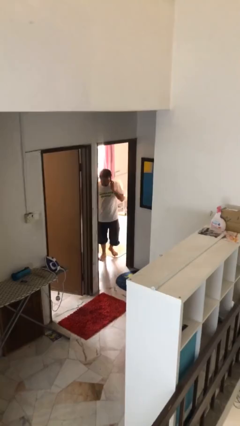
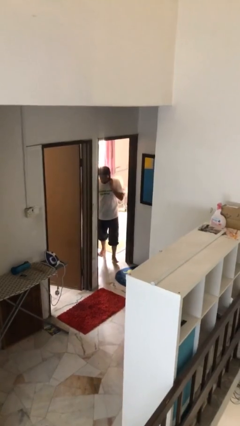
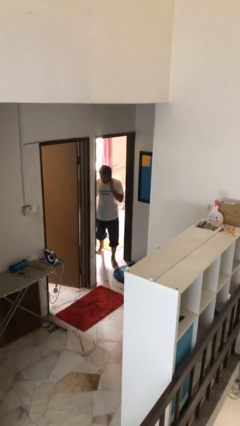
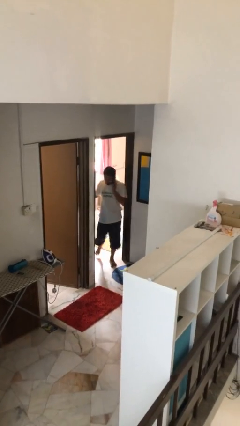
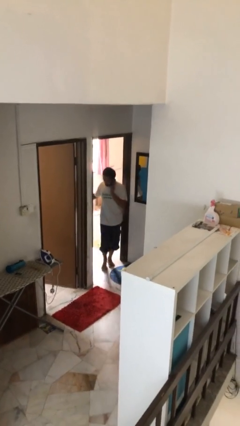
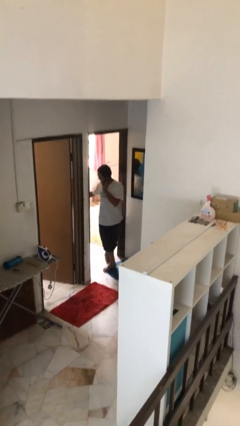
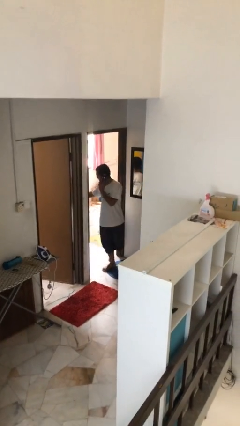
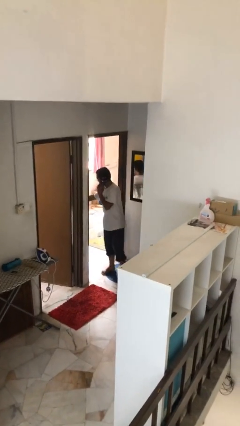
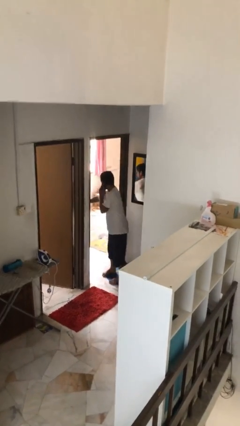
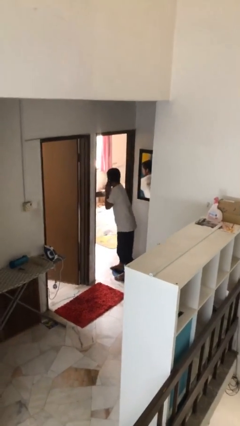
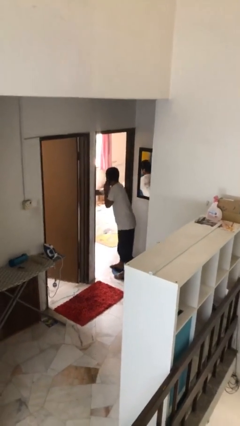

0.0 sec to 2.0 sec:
person enters scene through structure

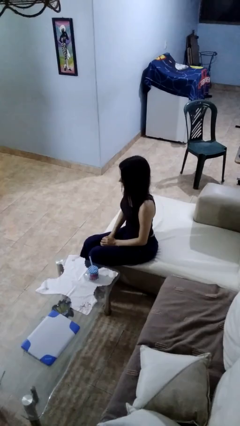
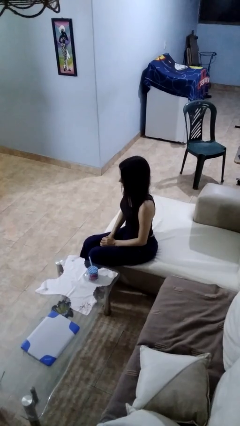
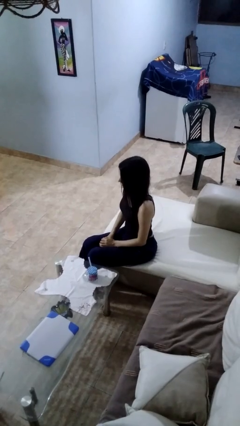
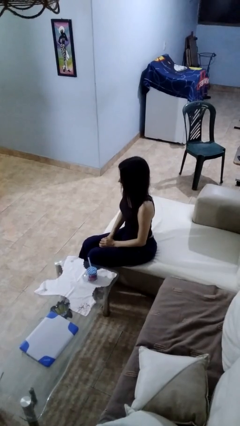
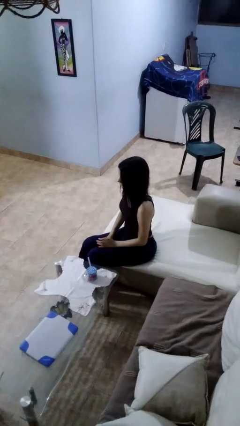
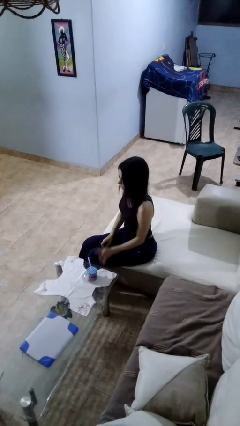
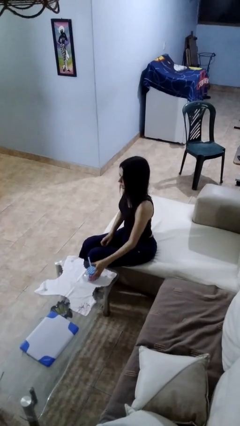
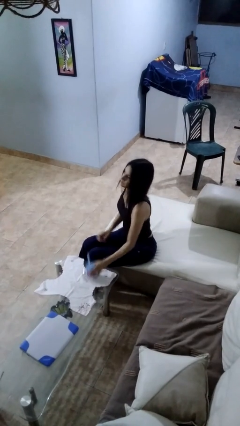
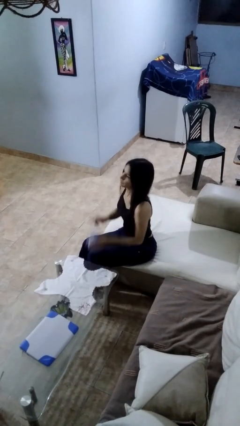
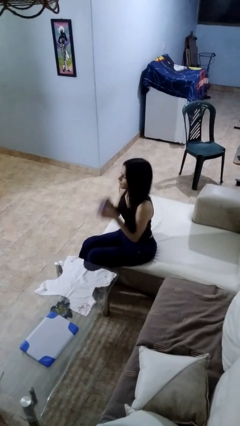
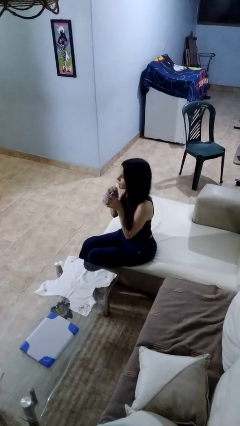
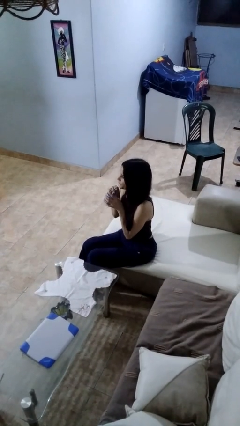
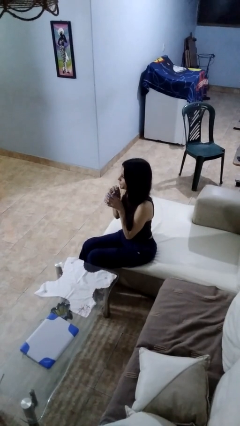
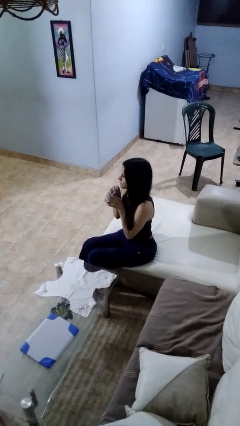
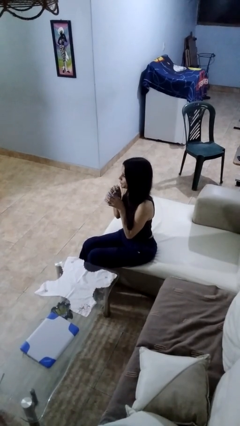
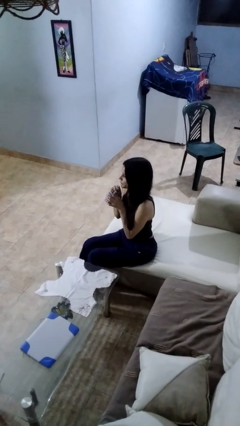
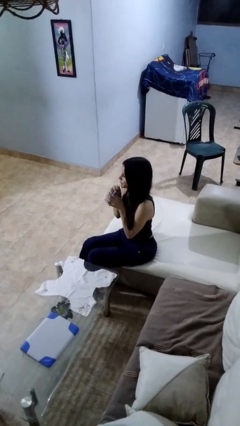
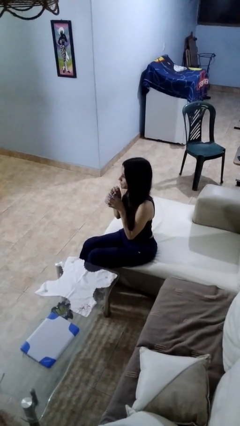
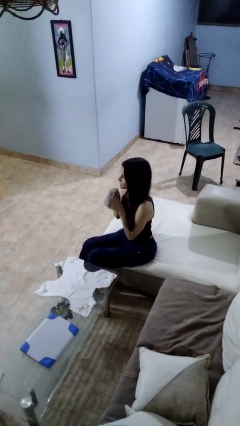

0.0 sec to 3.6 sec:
person drinks from straw

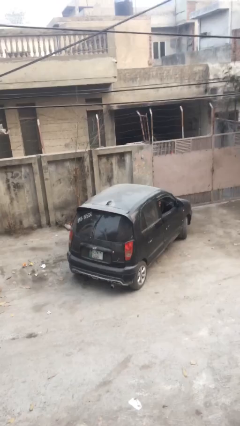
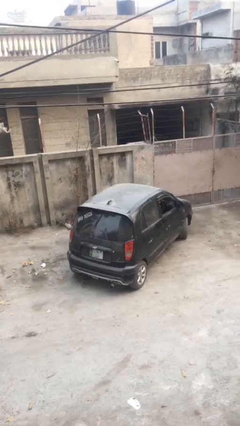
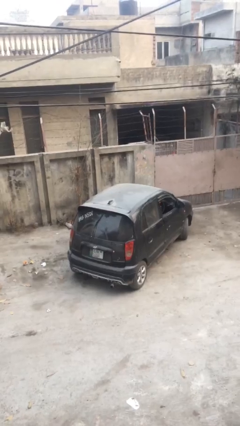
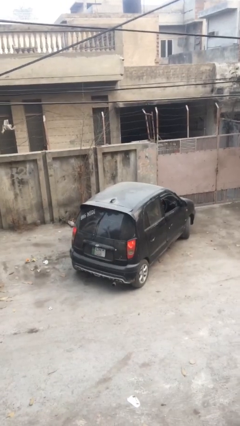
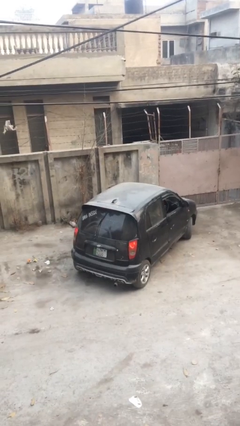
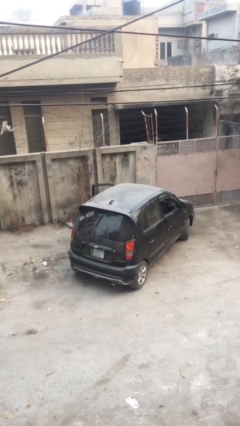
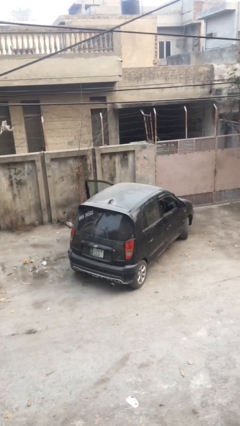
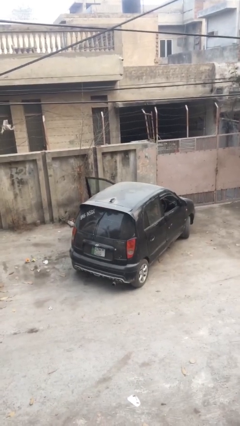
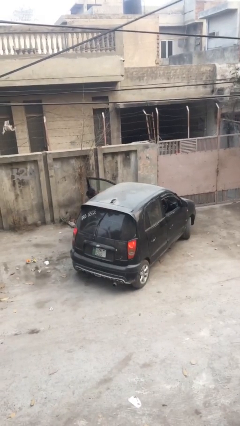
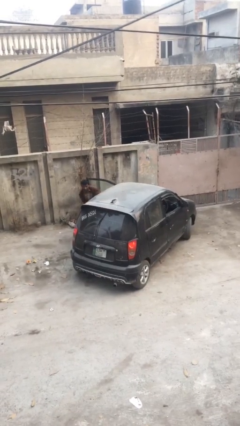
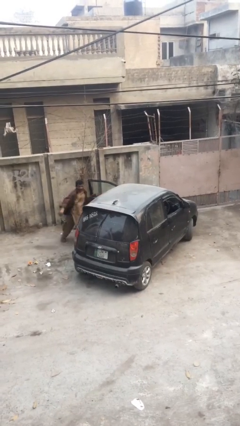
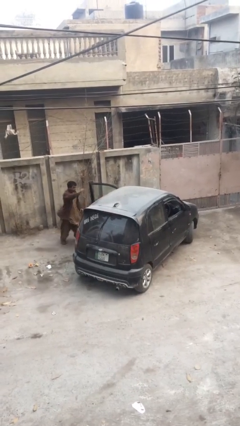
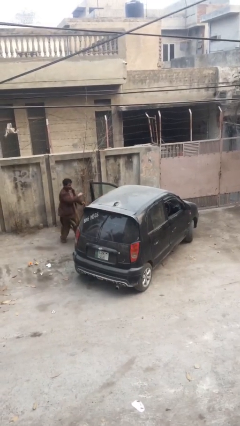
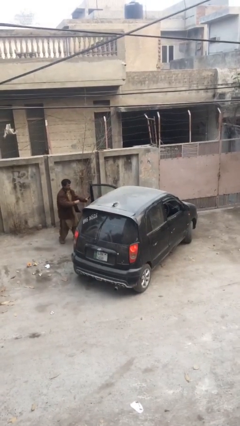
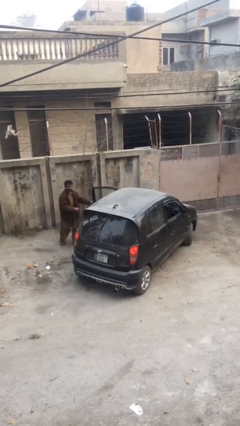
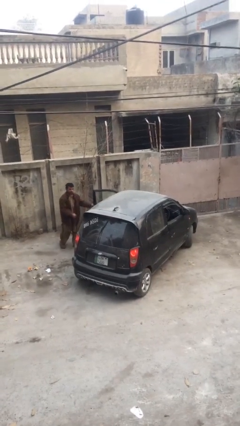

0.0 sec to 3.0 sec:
car drops off person

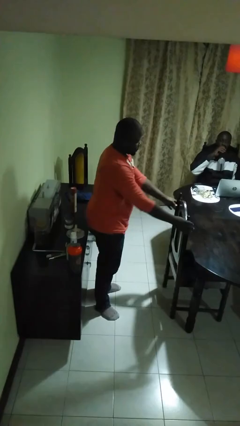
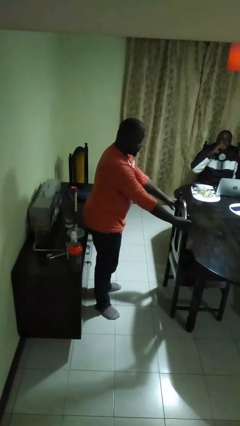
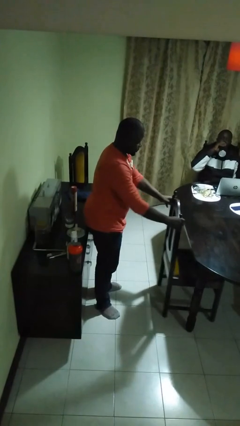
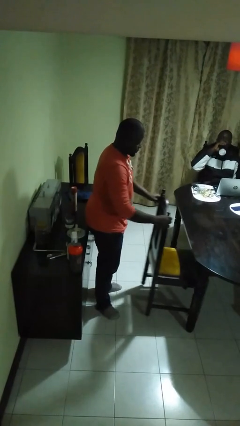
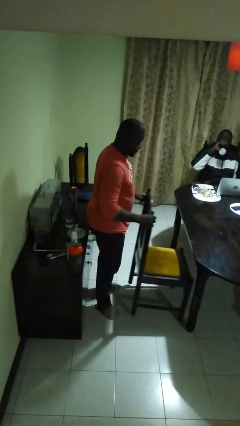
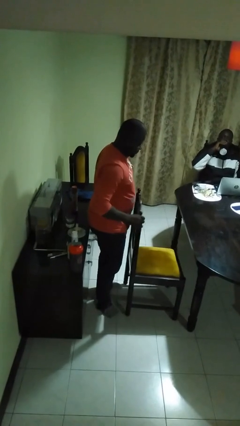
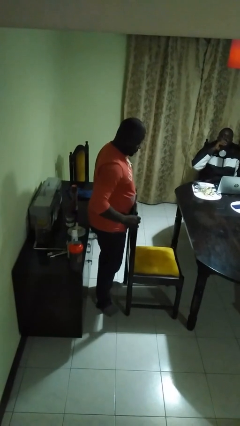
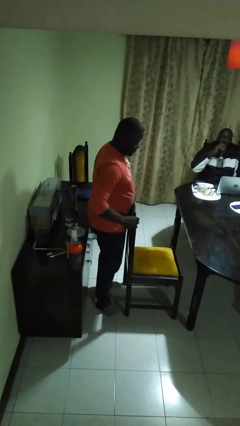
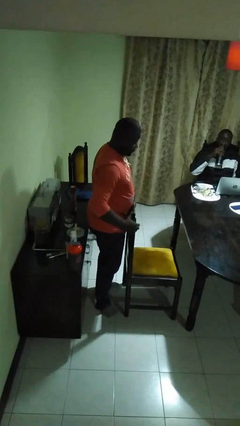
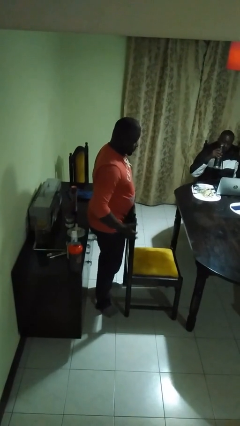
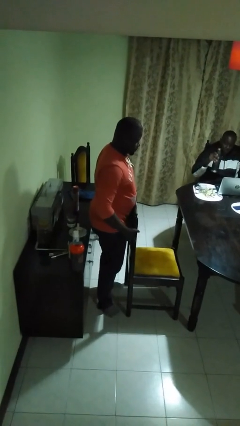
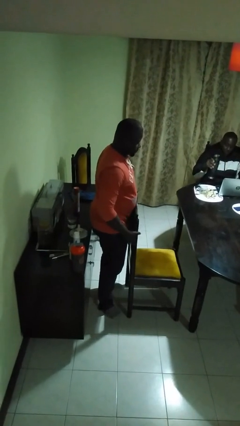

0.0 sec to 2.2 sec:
person pulls out chair

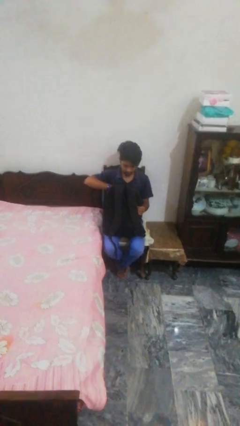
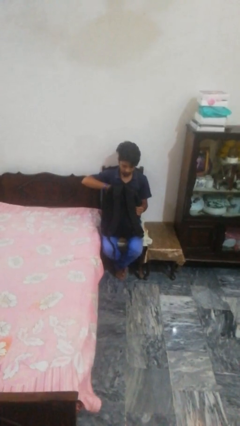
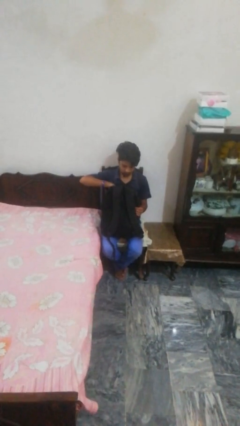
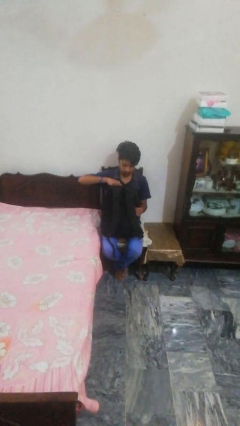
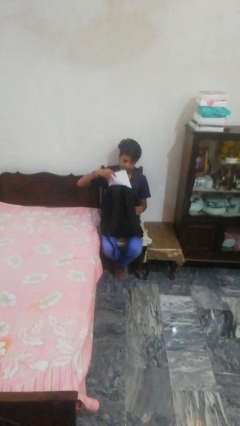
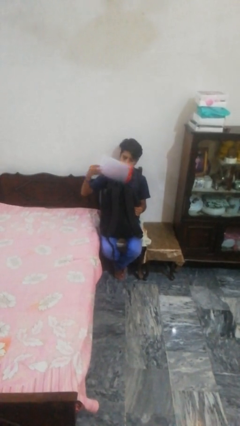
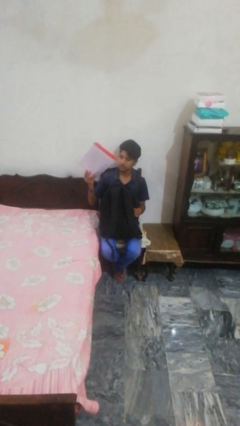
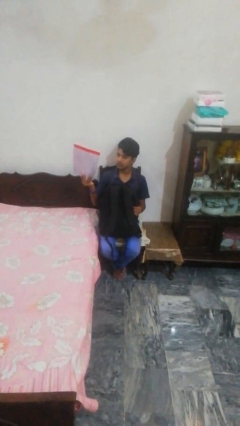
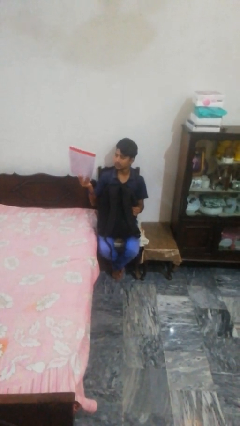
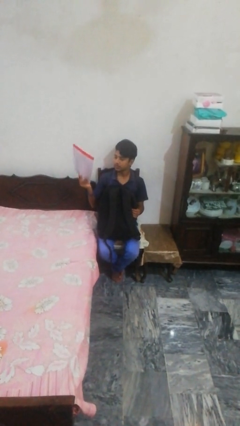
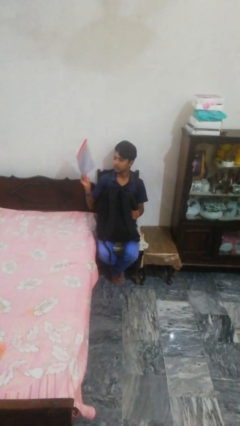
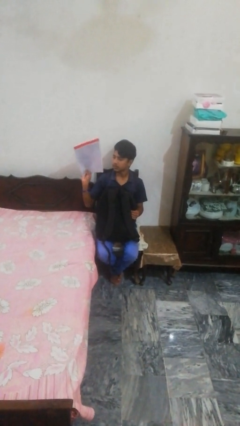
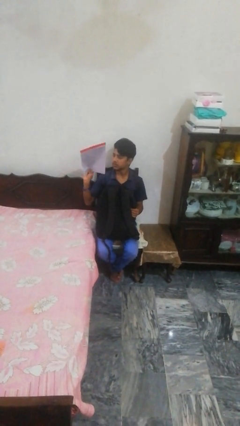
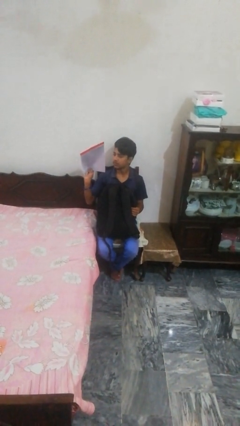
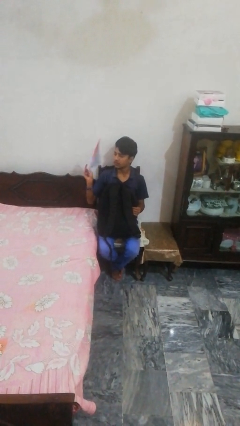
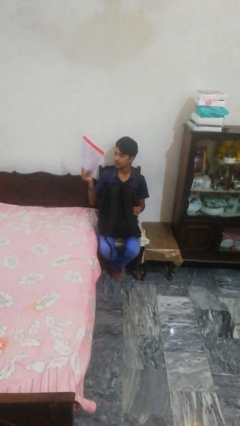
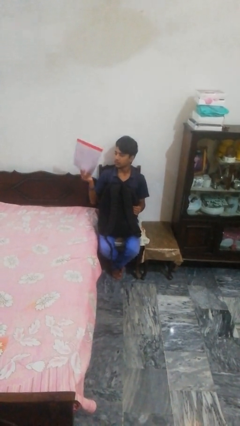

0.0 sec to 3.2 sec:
person takes object from backpack

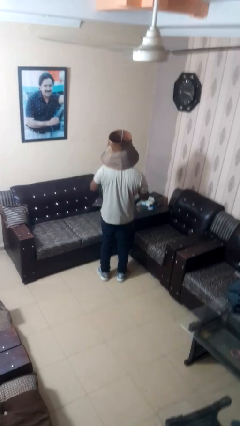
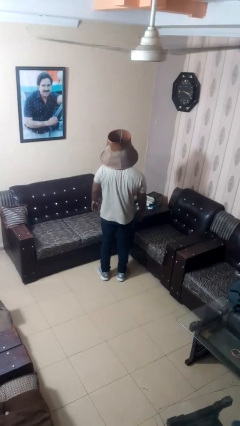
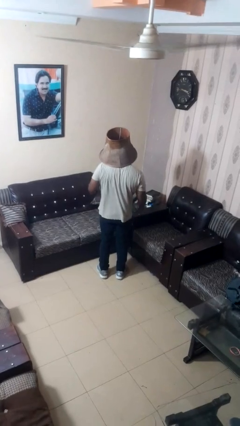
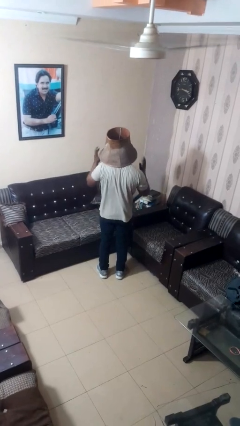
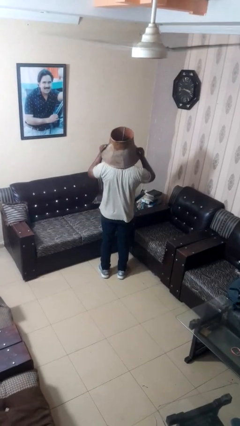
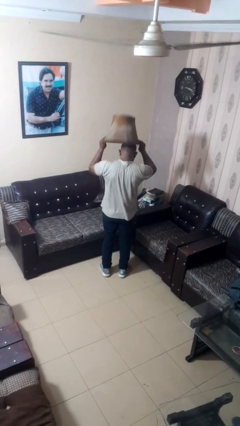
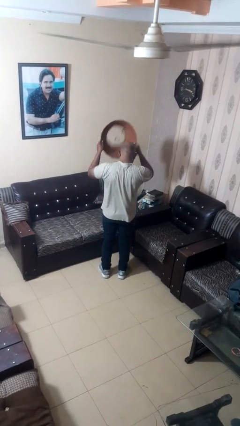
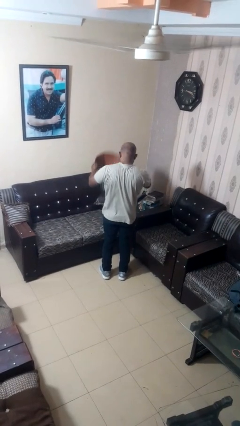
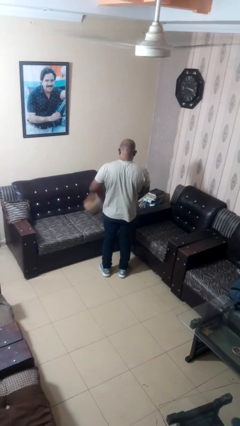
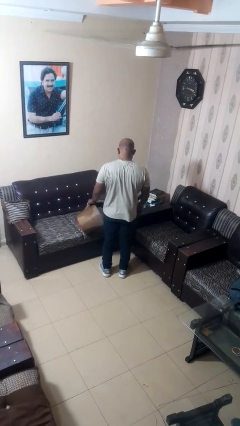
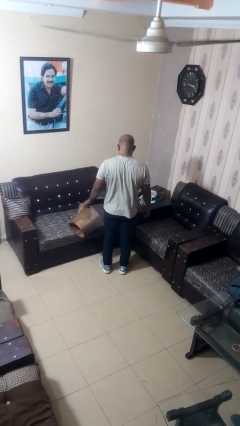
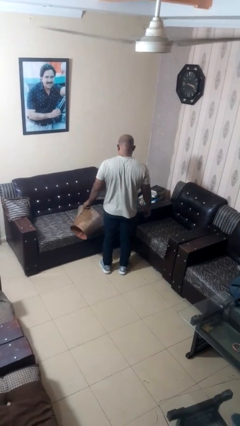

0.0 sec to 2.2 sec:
person takes off hat

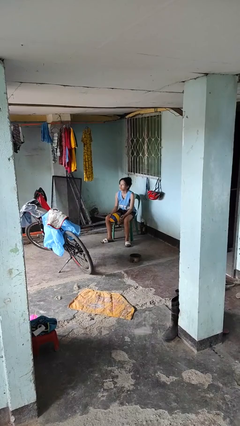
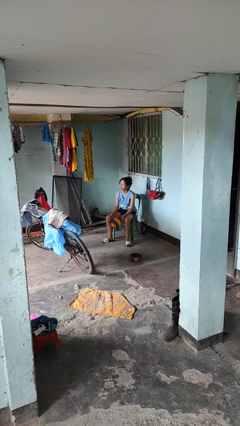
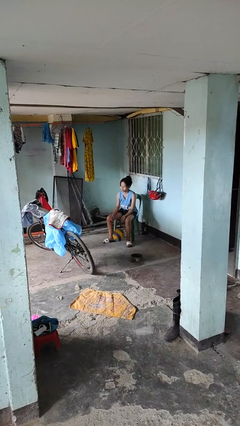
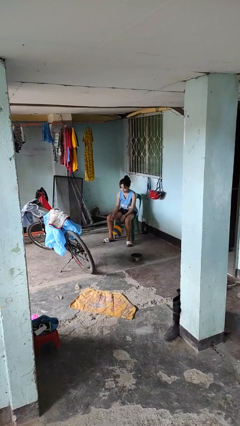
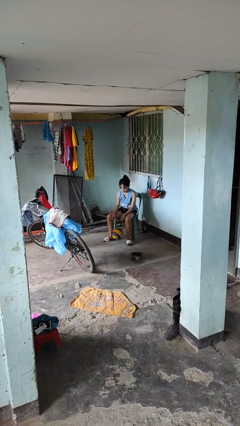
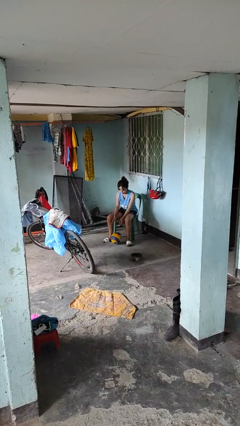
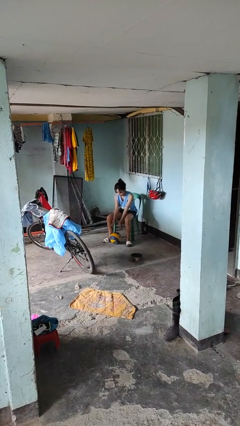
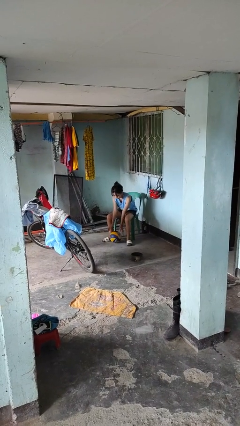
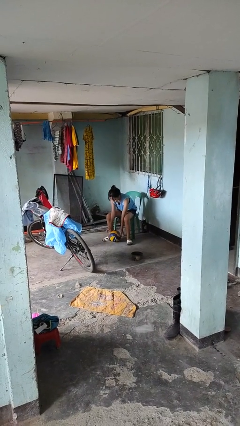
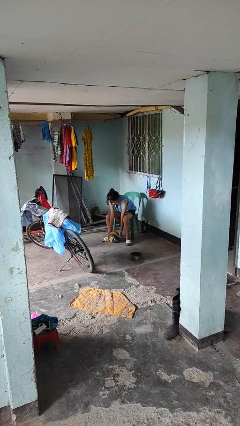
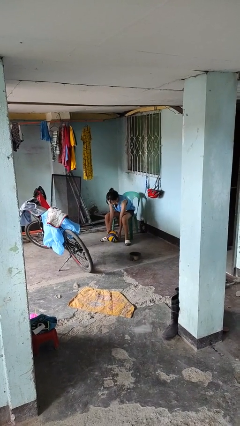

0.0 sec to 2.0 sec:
person drops object
